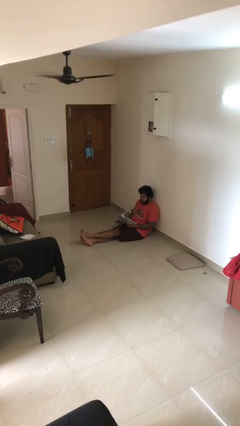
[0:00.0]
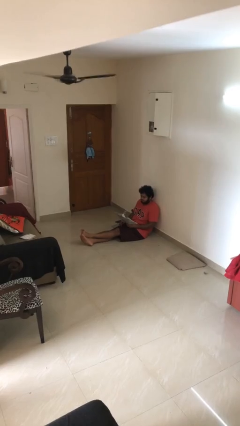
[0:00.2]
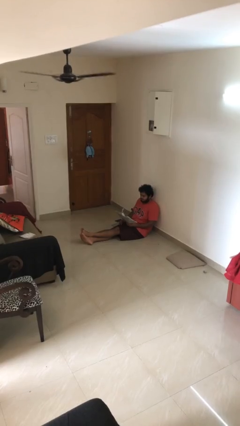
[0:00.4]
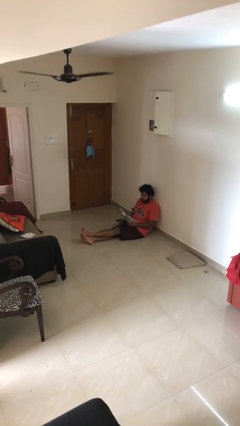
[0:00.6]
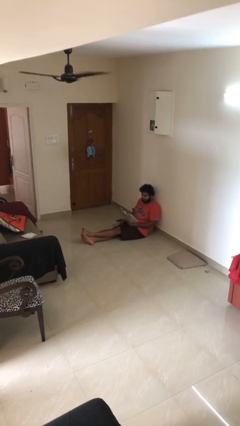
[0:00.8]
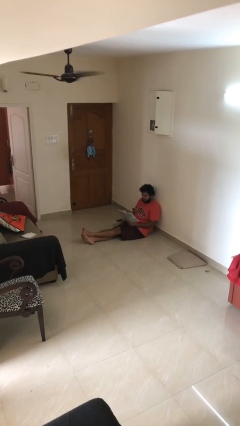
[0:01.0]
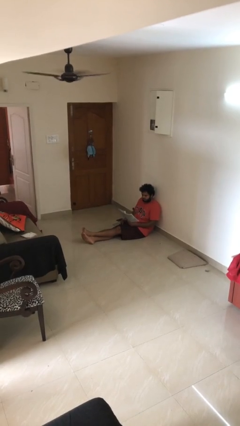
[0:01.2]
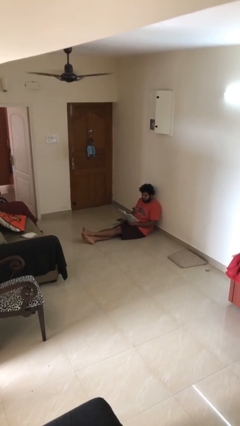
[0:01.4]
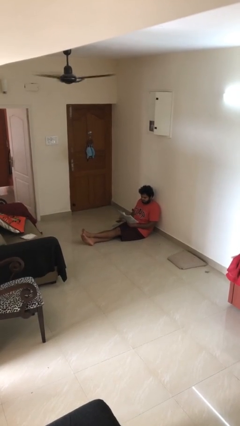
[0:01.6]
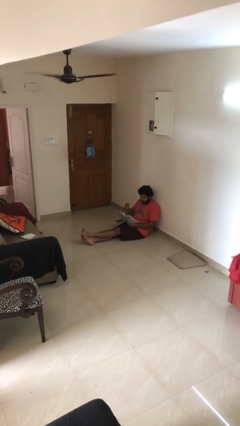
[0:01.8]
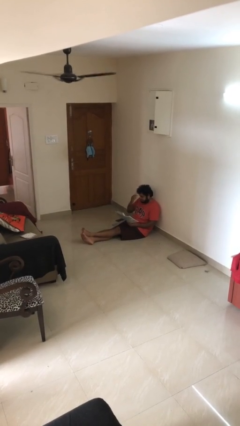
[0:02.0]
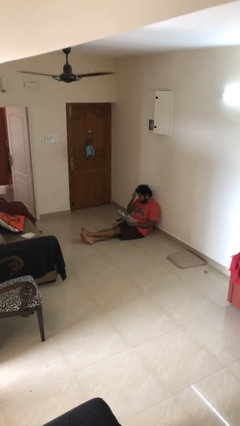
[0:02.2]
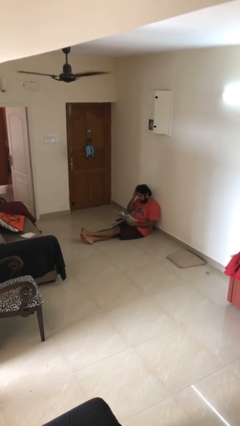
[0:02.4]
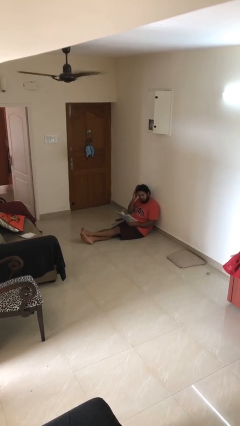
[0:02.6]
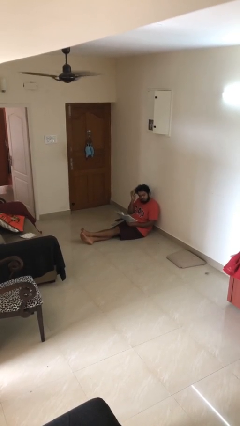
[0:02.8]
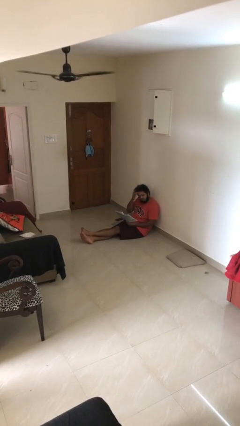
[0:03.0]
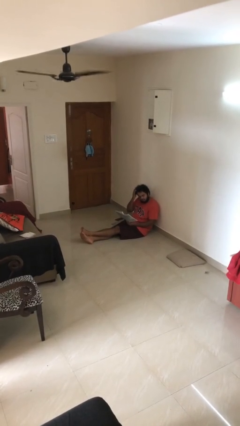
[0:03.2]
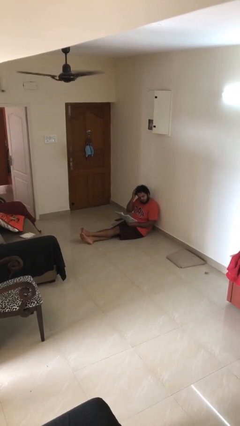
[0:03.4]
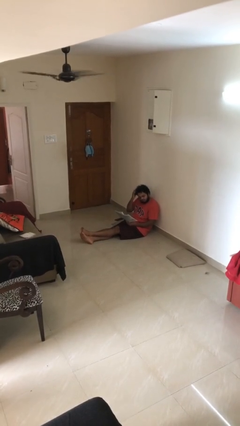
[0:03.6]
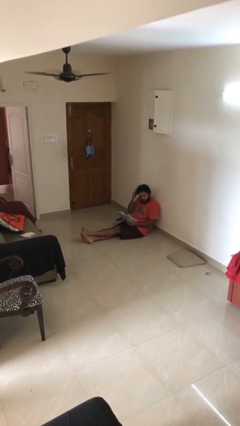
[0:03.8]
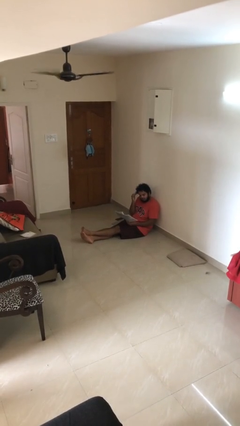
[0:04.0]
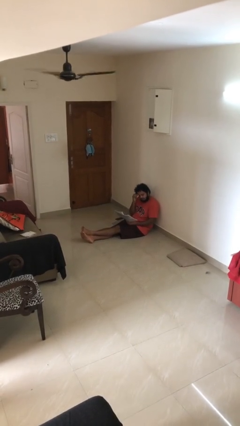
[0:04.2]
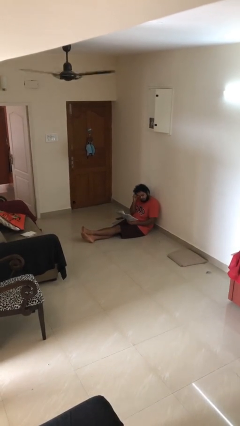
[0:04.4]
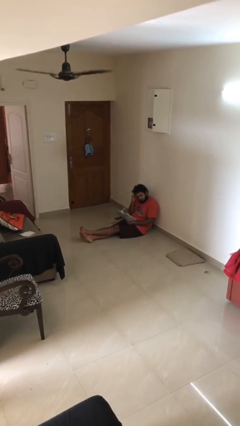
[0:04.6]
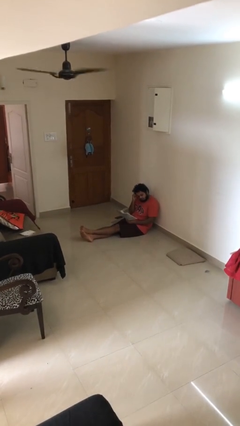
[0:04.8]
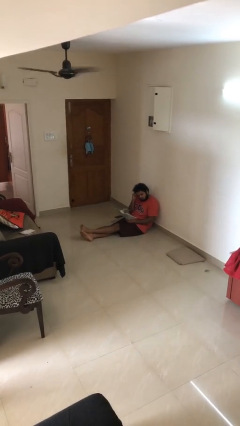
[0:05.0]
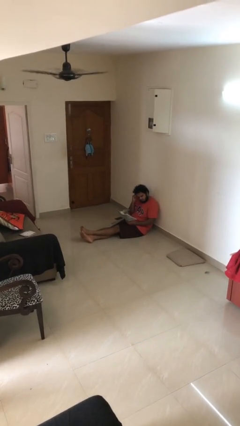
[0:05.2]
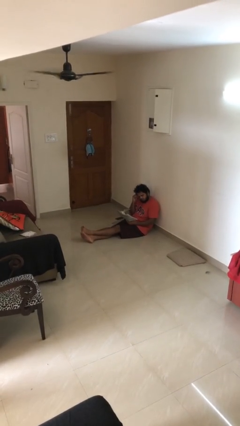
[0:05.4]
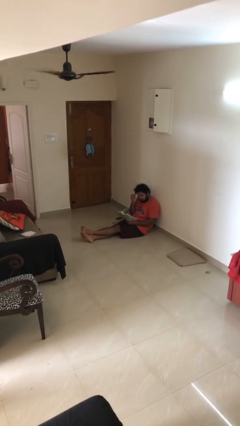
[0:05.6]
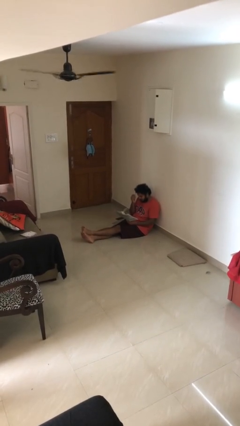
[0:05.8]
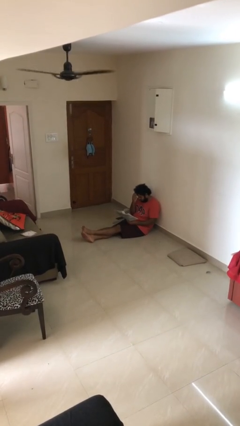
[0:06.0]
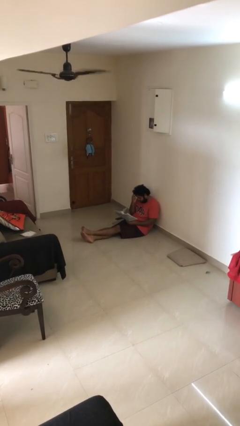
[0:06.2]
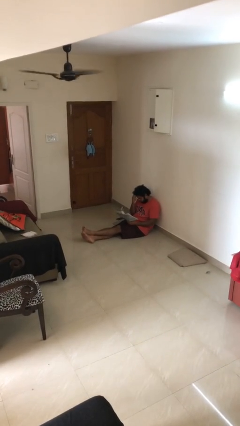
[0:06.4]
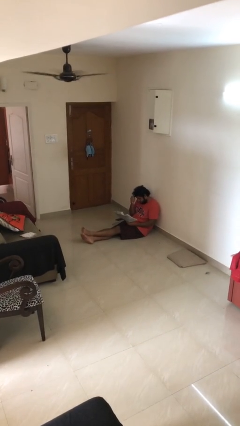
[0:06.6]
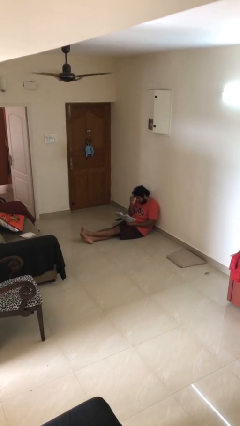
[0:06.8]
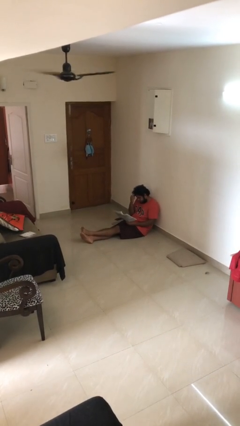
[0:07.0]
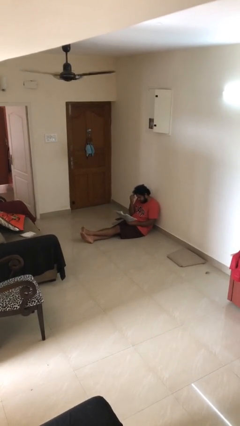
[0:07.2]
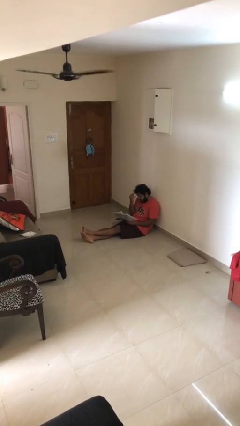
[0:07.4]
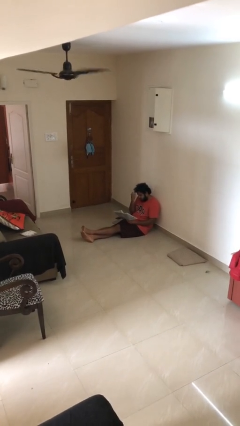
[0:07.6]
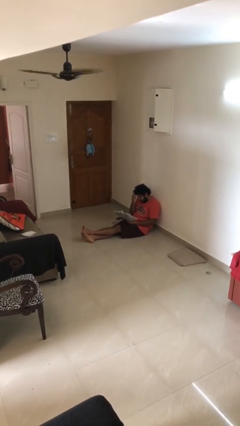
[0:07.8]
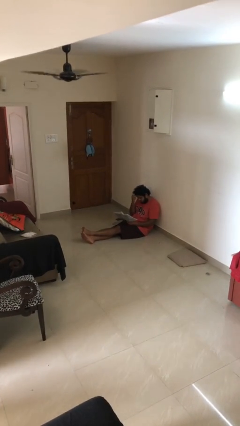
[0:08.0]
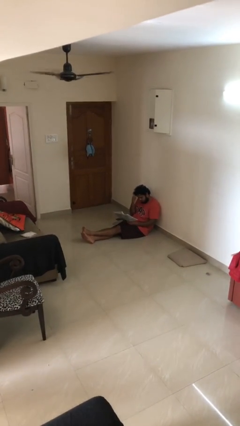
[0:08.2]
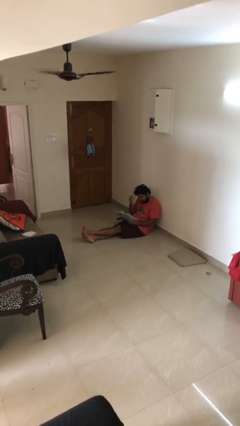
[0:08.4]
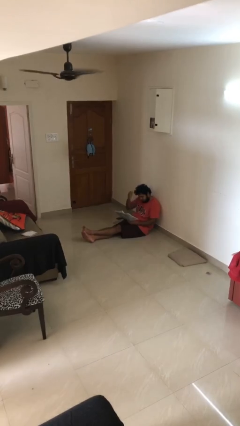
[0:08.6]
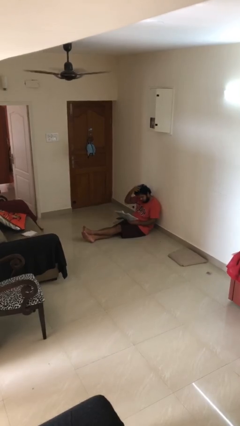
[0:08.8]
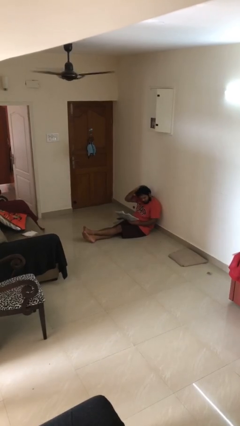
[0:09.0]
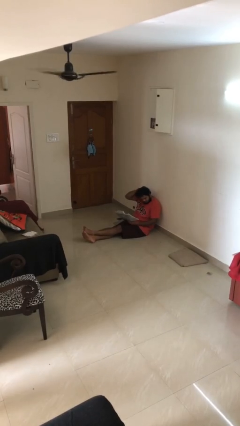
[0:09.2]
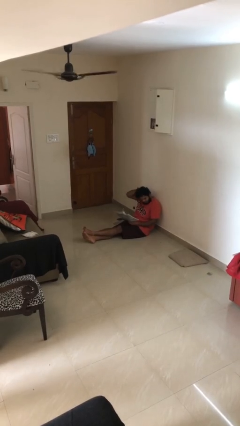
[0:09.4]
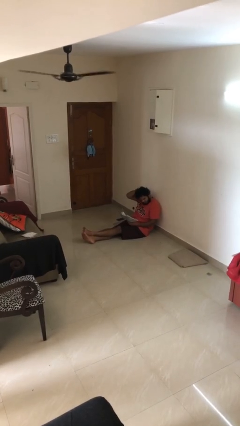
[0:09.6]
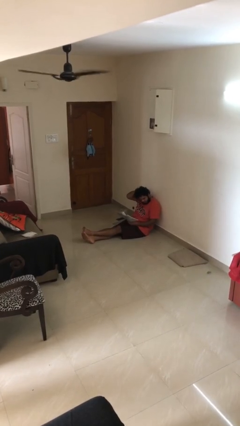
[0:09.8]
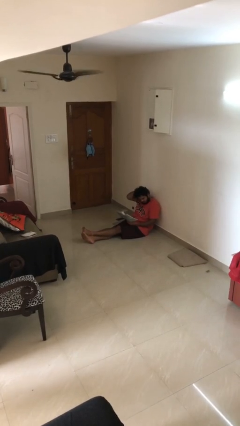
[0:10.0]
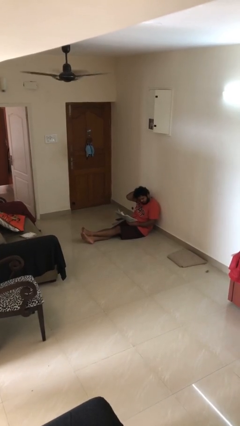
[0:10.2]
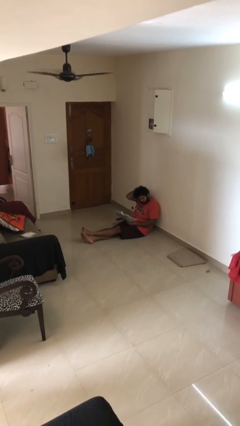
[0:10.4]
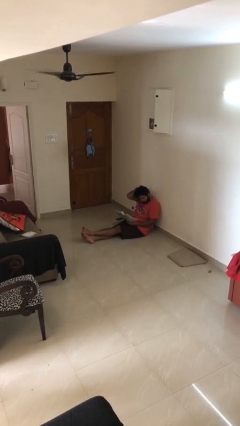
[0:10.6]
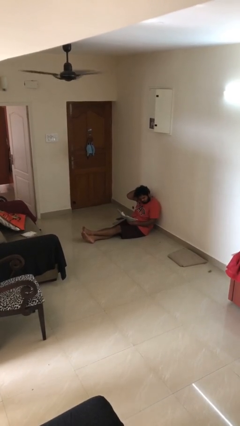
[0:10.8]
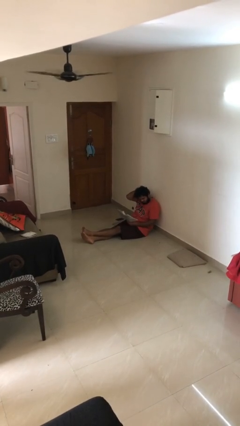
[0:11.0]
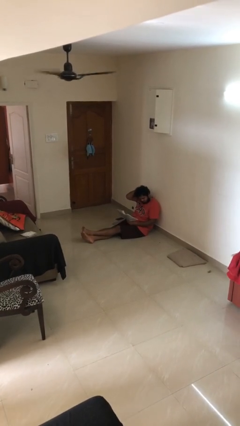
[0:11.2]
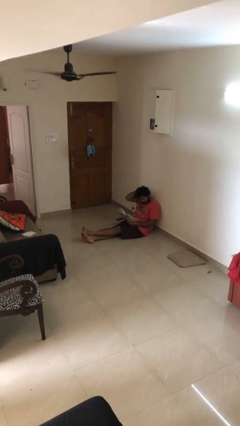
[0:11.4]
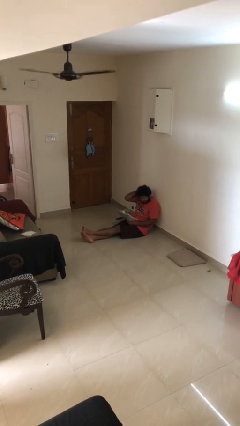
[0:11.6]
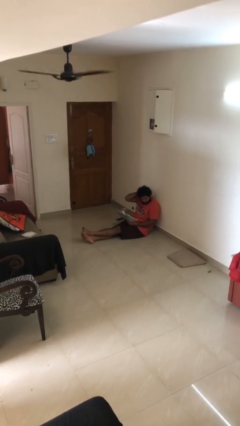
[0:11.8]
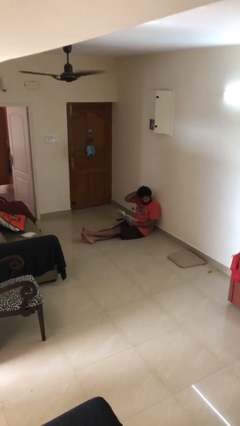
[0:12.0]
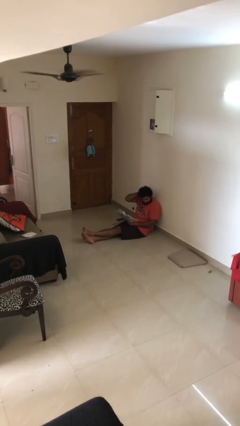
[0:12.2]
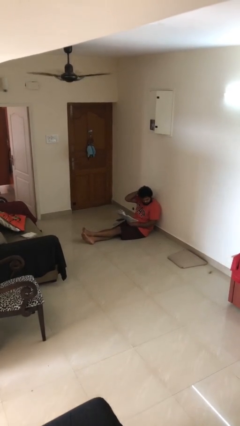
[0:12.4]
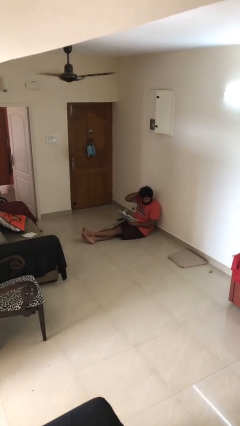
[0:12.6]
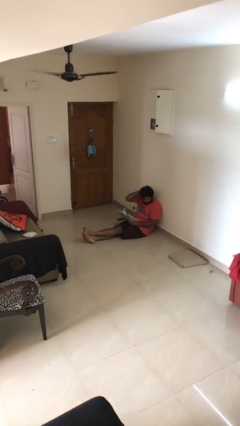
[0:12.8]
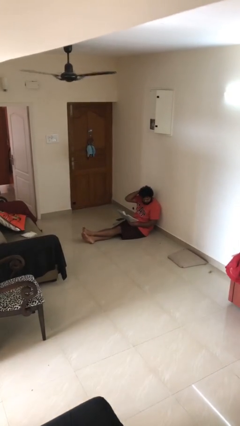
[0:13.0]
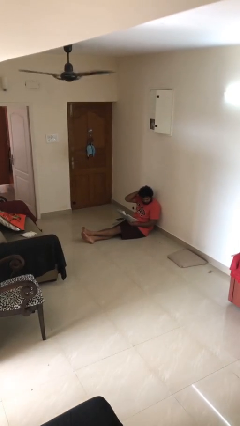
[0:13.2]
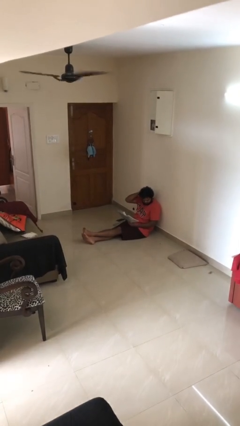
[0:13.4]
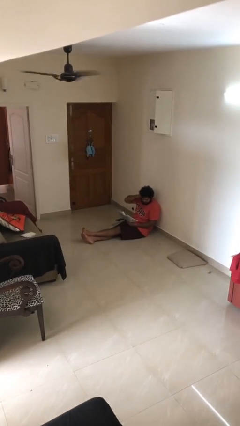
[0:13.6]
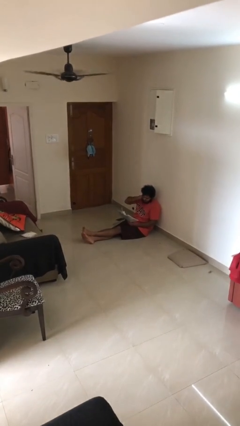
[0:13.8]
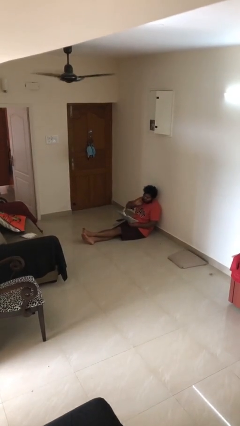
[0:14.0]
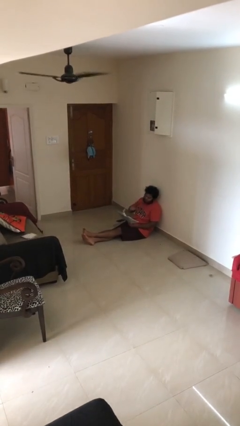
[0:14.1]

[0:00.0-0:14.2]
person reads document

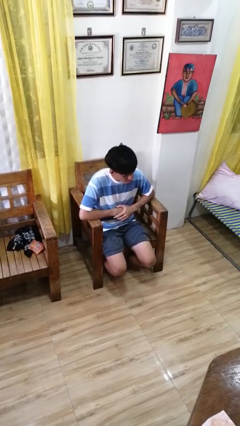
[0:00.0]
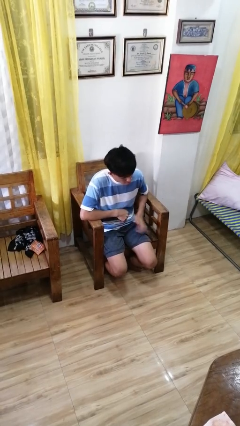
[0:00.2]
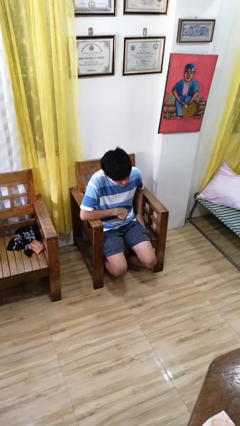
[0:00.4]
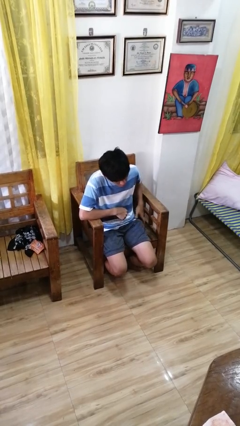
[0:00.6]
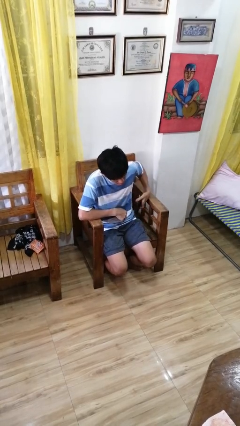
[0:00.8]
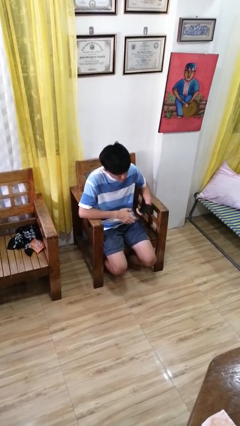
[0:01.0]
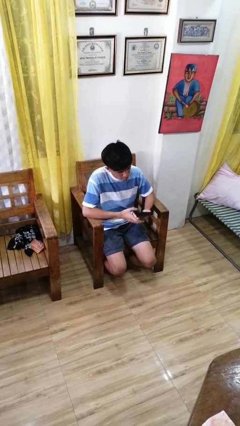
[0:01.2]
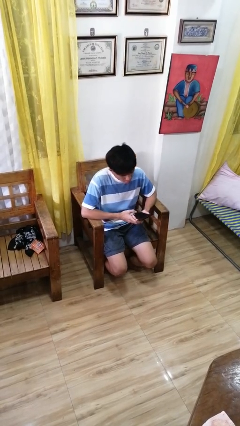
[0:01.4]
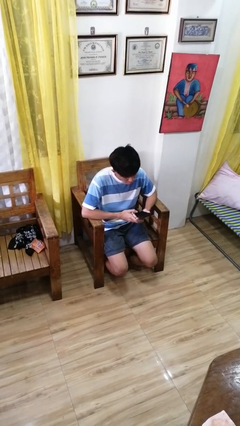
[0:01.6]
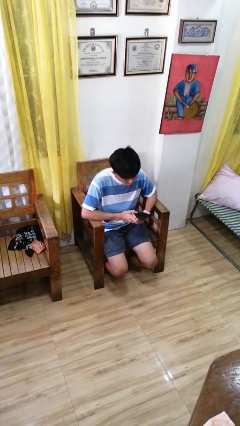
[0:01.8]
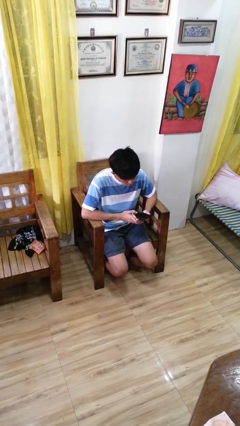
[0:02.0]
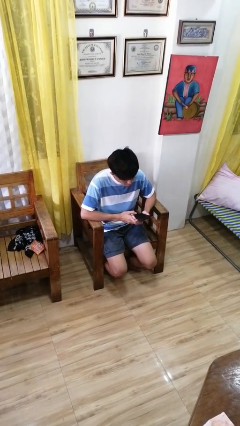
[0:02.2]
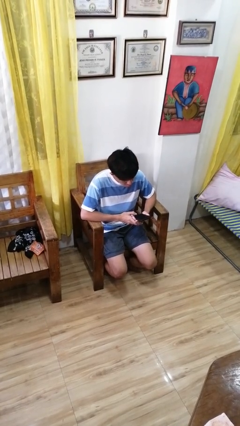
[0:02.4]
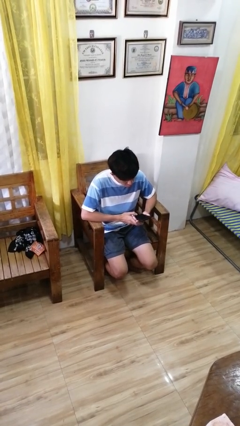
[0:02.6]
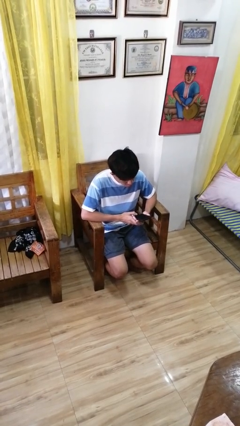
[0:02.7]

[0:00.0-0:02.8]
person takes phone from pocket

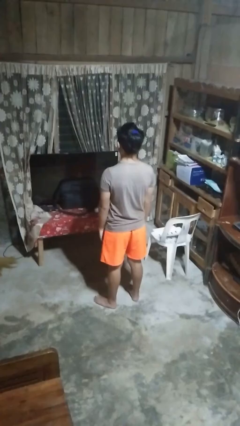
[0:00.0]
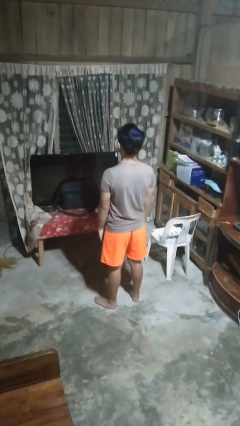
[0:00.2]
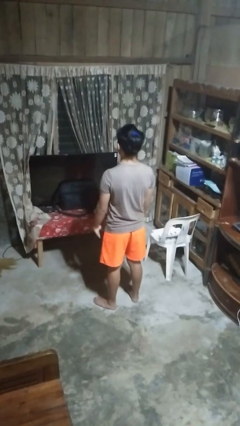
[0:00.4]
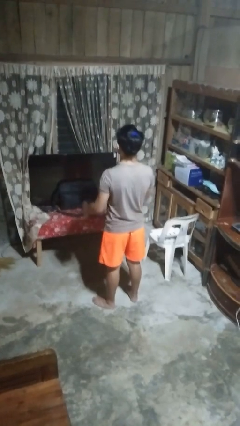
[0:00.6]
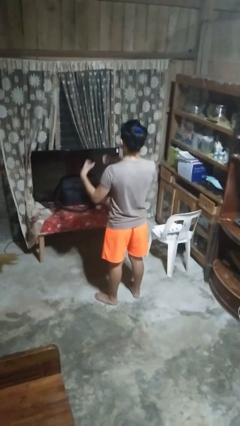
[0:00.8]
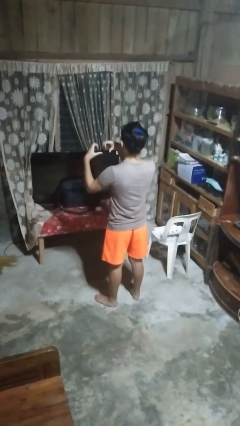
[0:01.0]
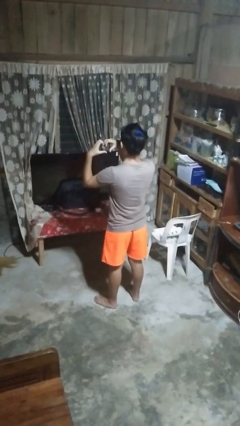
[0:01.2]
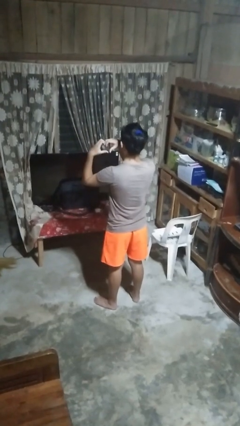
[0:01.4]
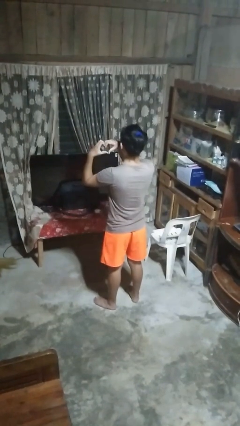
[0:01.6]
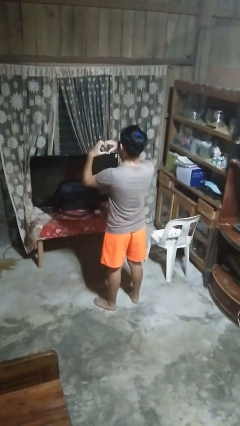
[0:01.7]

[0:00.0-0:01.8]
person gestures heart
